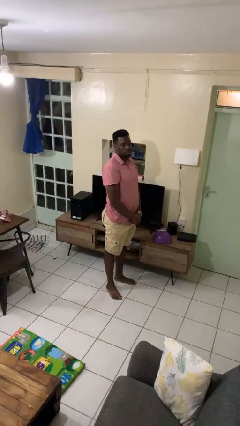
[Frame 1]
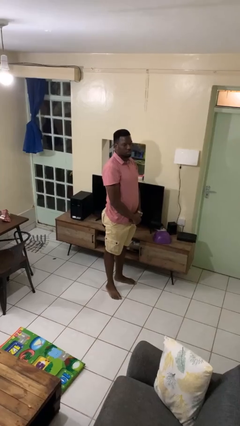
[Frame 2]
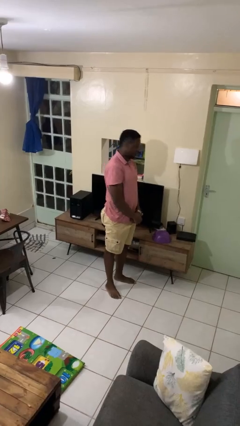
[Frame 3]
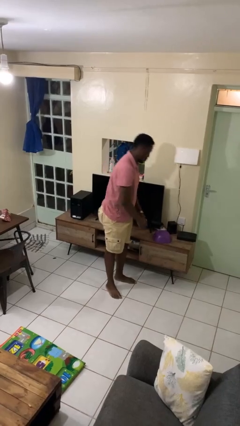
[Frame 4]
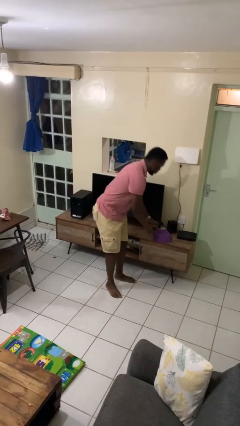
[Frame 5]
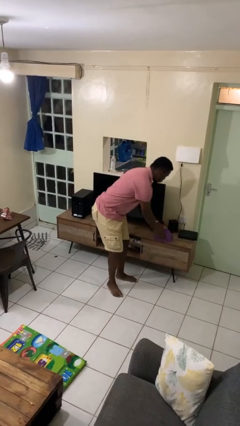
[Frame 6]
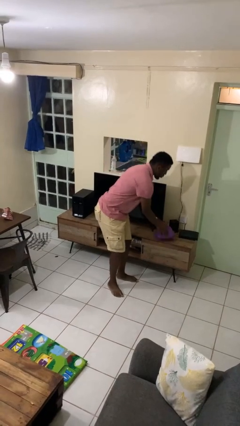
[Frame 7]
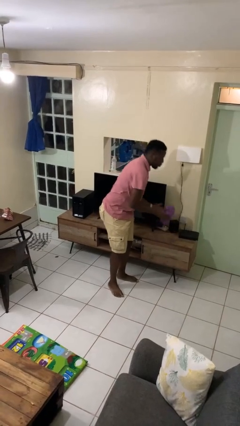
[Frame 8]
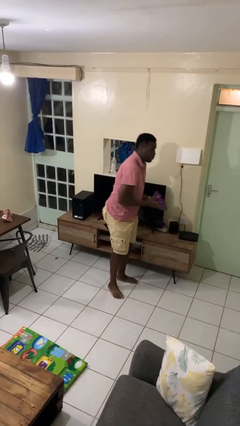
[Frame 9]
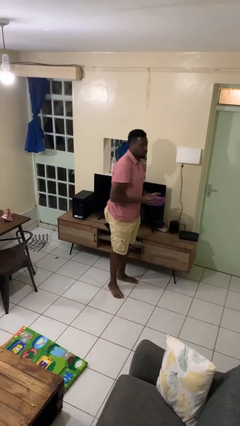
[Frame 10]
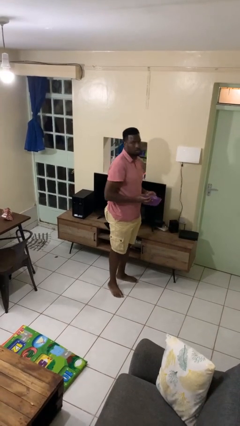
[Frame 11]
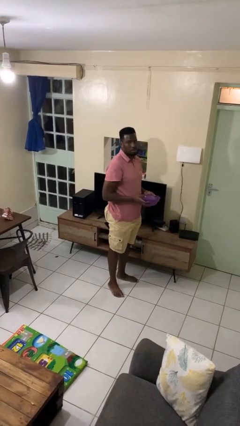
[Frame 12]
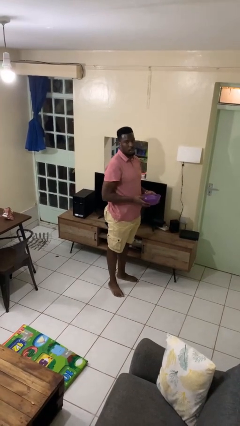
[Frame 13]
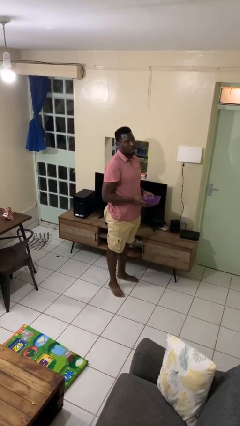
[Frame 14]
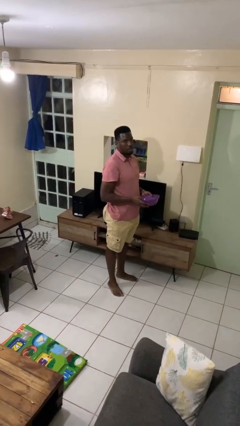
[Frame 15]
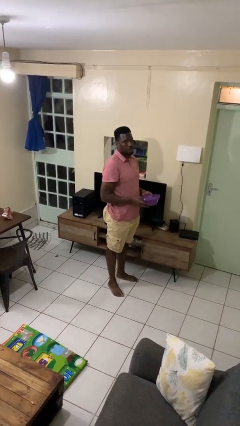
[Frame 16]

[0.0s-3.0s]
person picks up object from countertop

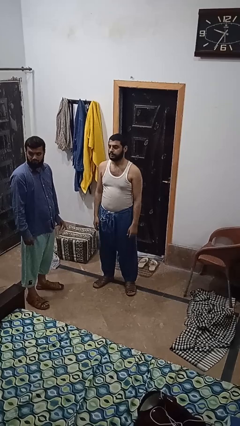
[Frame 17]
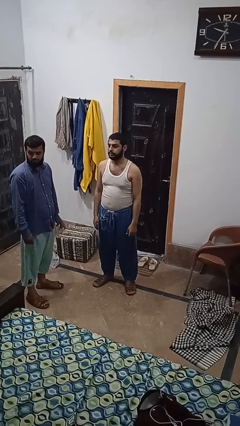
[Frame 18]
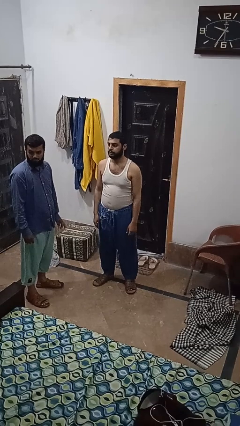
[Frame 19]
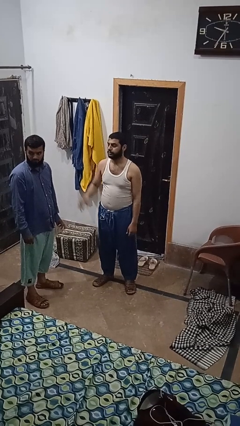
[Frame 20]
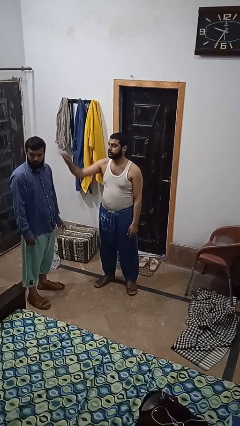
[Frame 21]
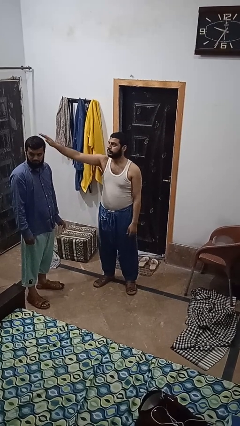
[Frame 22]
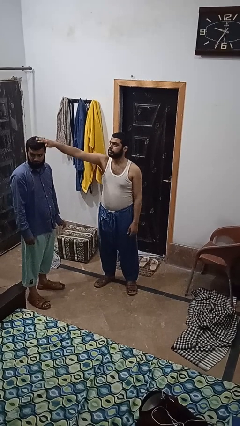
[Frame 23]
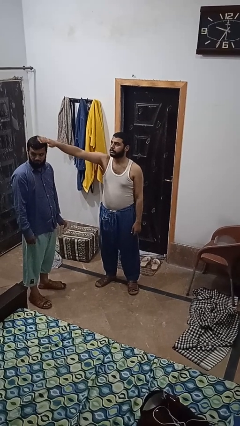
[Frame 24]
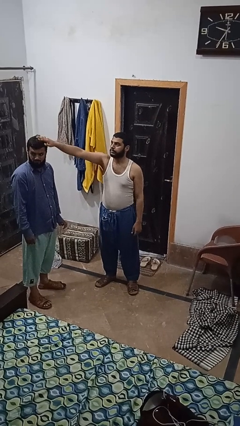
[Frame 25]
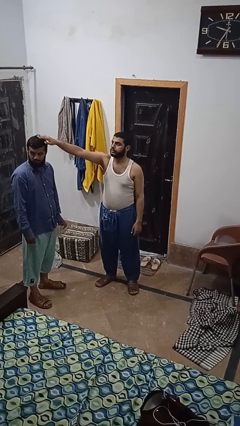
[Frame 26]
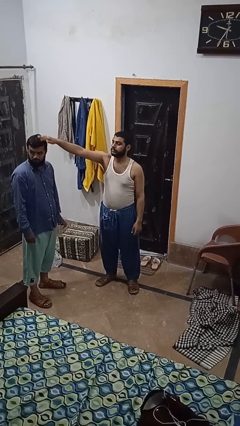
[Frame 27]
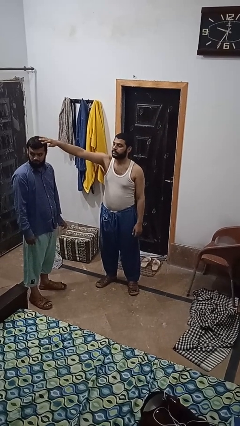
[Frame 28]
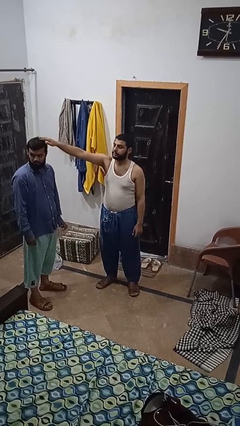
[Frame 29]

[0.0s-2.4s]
person grabs person by hair

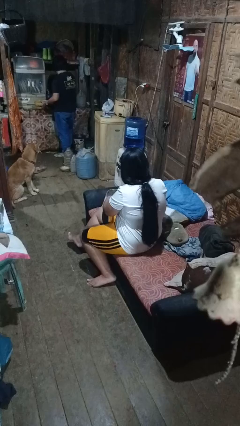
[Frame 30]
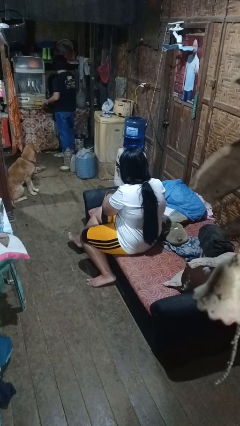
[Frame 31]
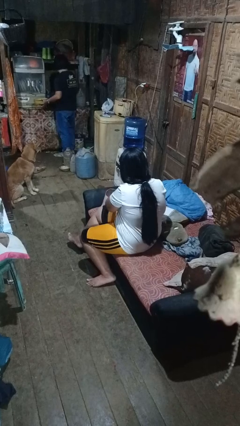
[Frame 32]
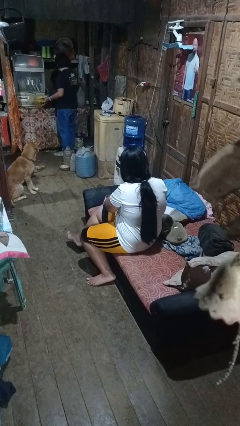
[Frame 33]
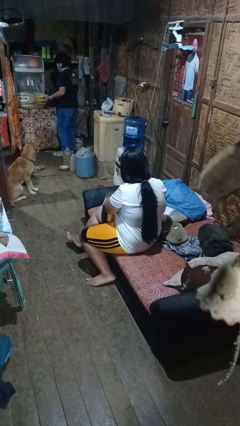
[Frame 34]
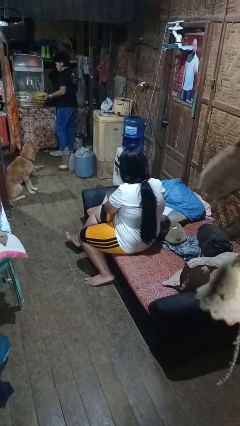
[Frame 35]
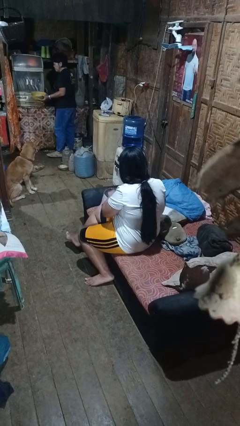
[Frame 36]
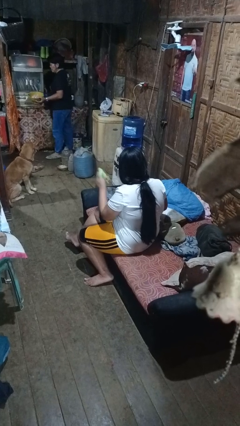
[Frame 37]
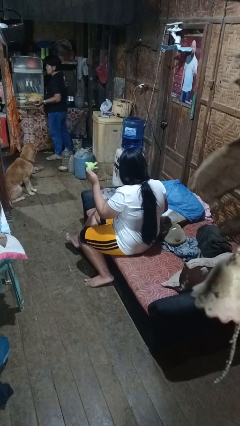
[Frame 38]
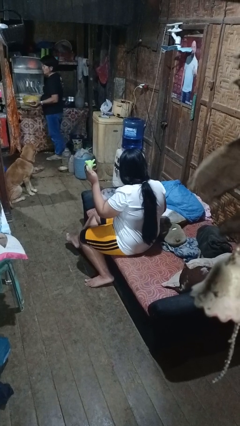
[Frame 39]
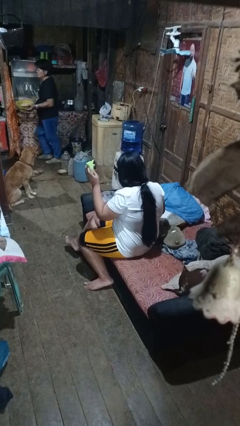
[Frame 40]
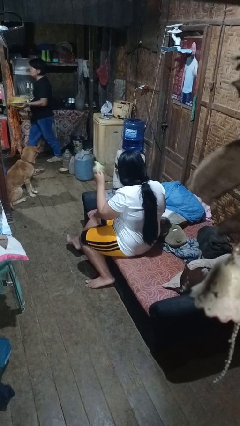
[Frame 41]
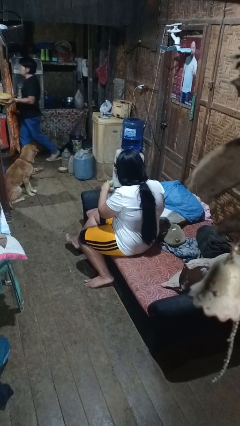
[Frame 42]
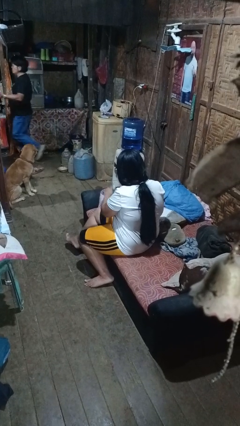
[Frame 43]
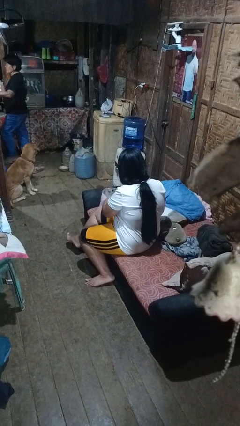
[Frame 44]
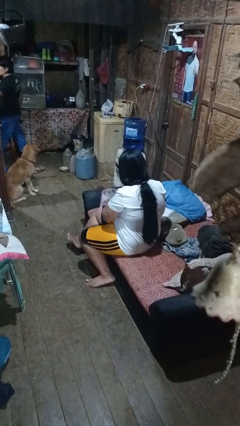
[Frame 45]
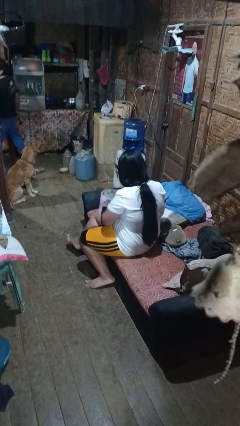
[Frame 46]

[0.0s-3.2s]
person searches in bag

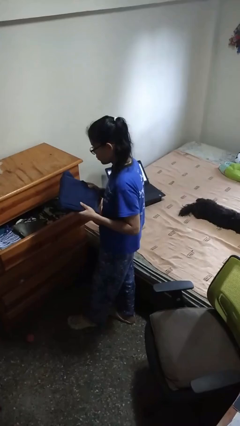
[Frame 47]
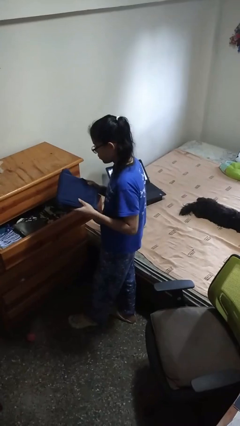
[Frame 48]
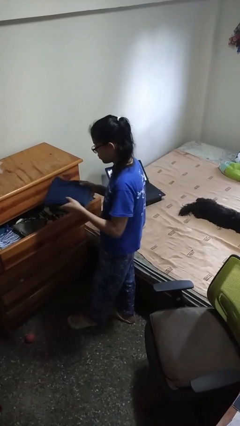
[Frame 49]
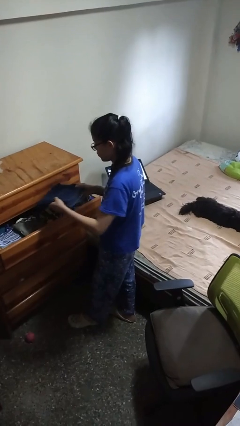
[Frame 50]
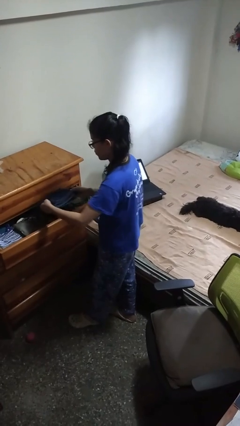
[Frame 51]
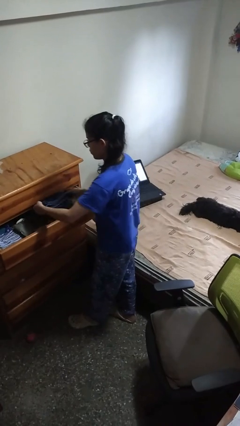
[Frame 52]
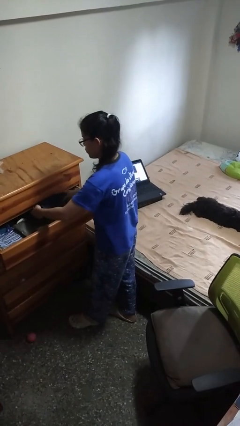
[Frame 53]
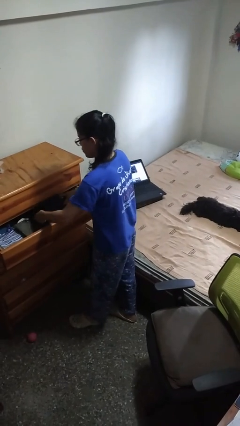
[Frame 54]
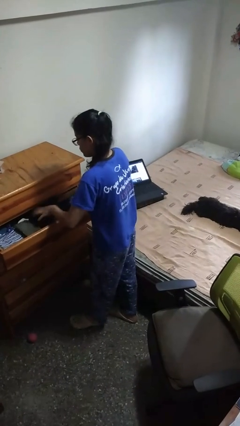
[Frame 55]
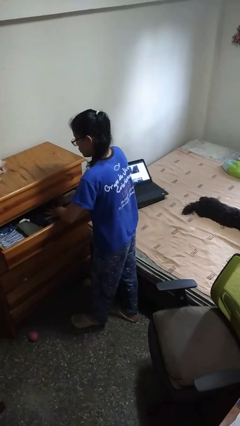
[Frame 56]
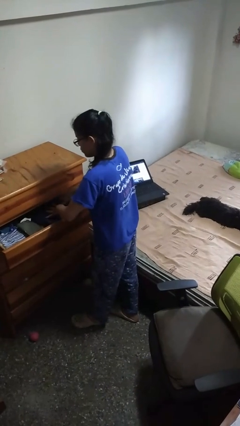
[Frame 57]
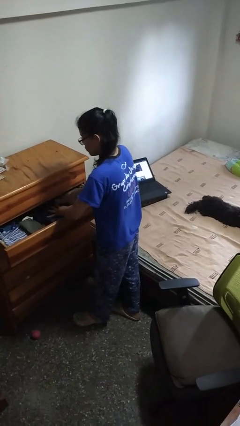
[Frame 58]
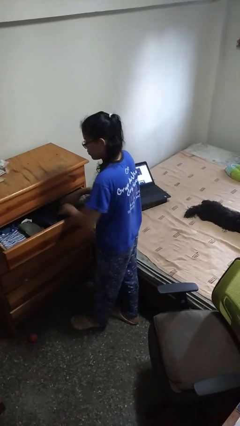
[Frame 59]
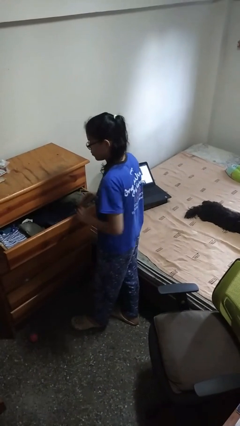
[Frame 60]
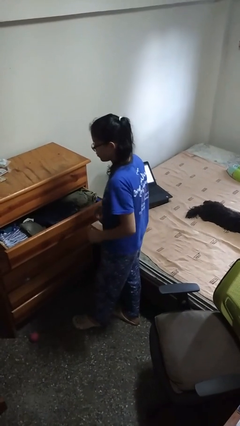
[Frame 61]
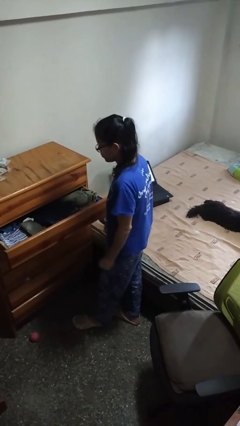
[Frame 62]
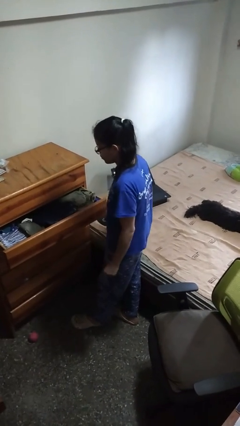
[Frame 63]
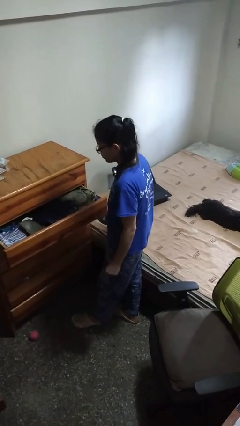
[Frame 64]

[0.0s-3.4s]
person puts clothes into dresser

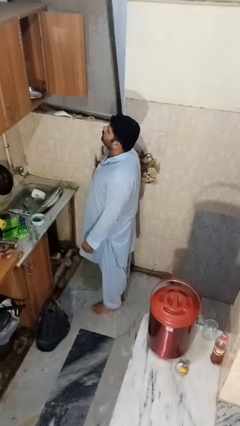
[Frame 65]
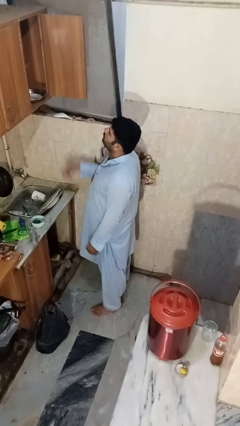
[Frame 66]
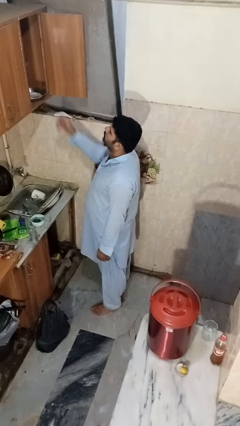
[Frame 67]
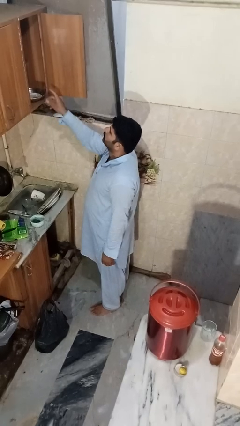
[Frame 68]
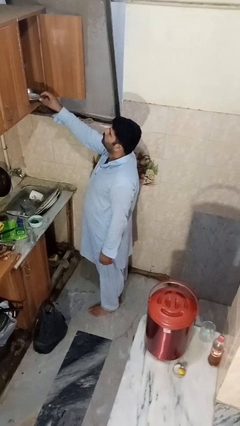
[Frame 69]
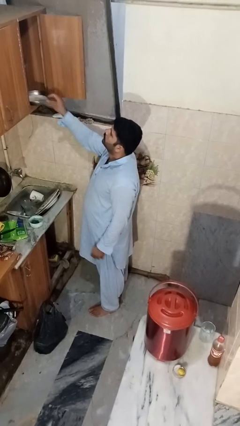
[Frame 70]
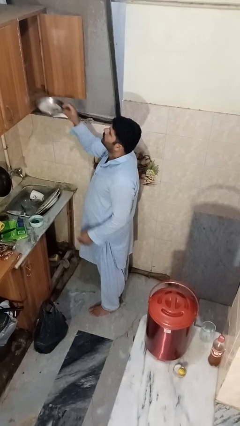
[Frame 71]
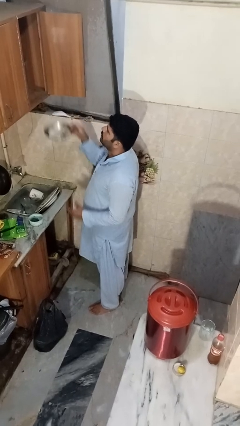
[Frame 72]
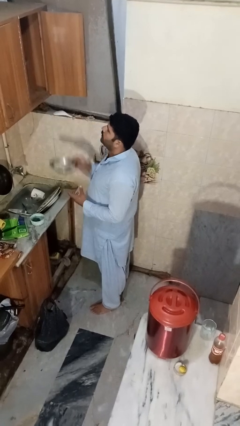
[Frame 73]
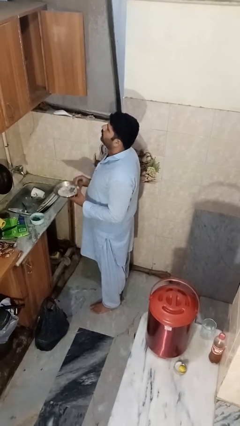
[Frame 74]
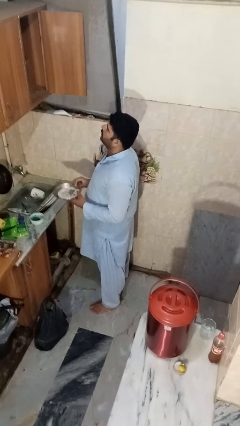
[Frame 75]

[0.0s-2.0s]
person takes object from cabinet

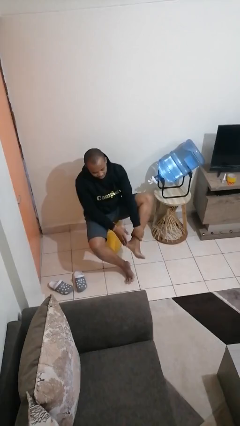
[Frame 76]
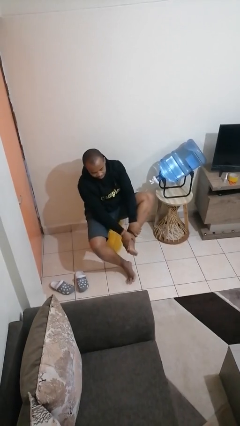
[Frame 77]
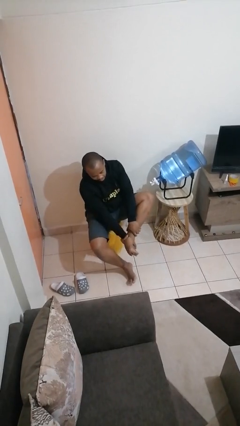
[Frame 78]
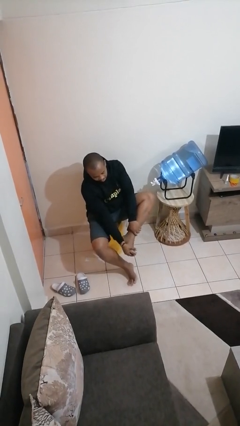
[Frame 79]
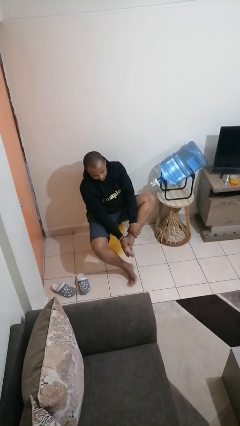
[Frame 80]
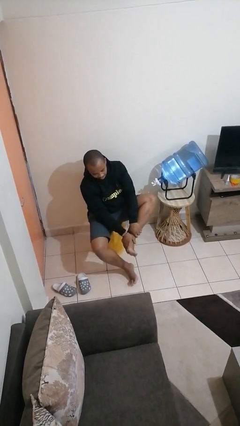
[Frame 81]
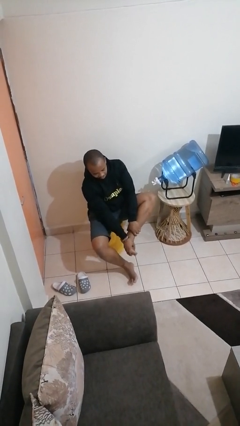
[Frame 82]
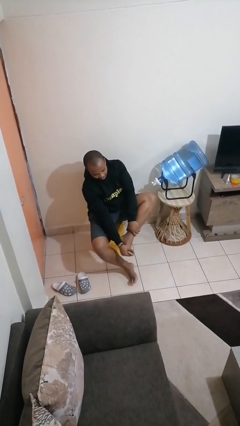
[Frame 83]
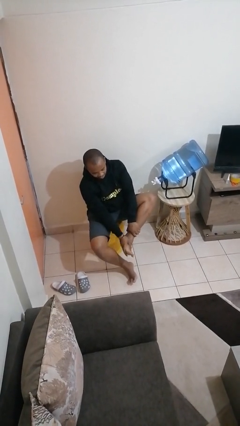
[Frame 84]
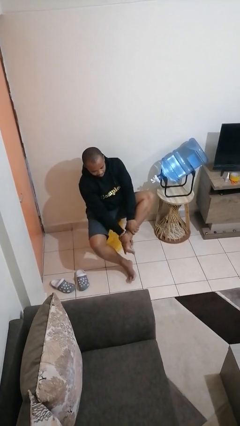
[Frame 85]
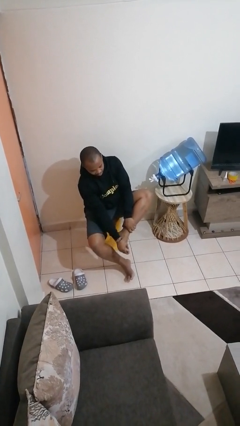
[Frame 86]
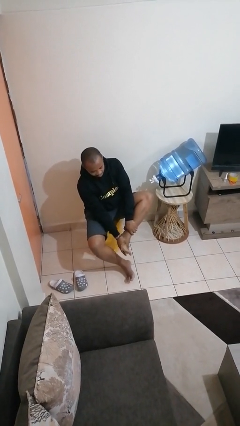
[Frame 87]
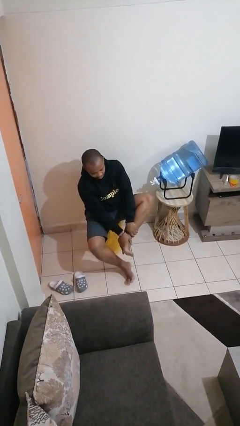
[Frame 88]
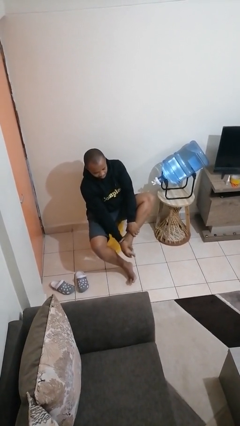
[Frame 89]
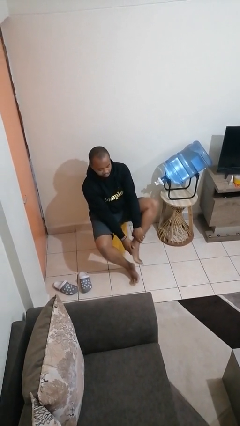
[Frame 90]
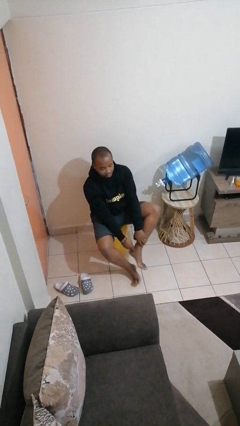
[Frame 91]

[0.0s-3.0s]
person rubs foot
